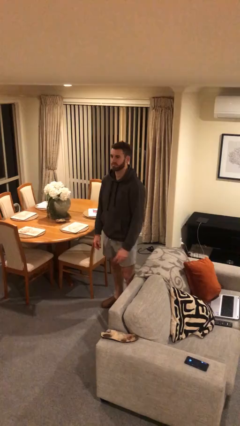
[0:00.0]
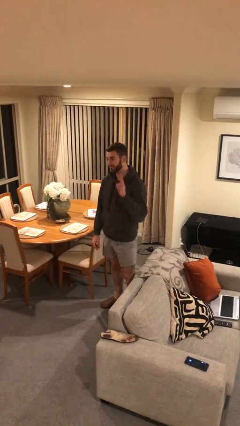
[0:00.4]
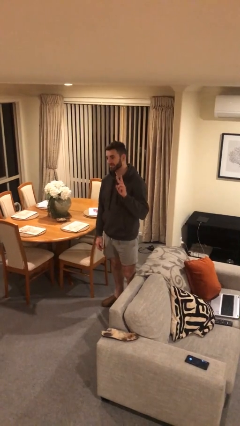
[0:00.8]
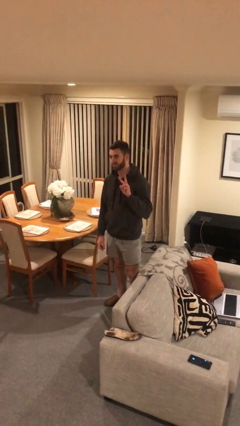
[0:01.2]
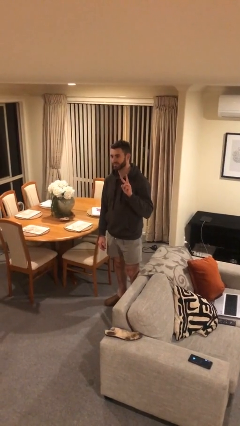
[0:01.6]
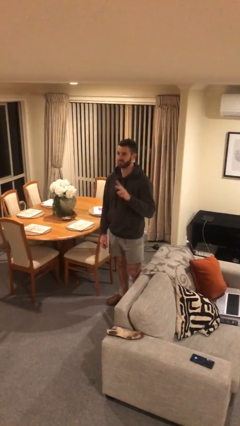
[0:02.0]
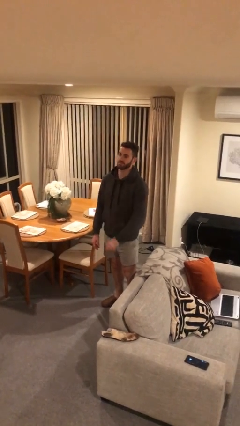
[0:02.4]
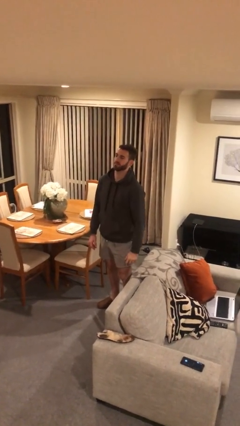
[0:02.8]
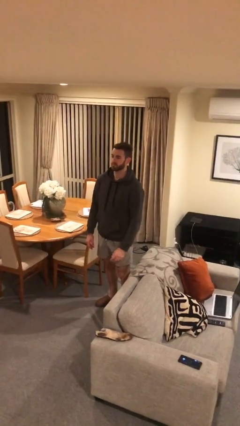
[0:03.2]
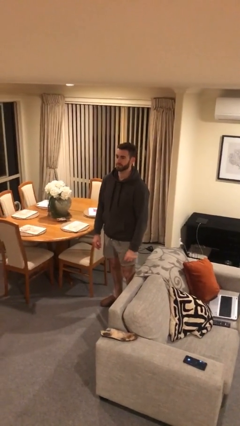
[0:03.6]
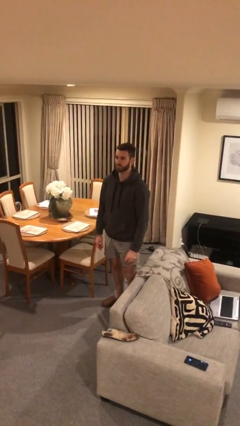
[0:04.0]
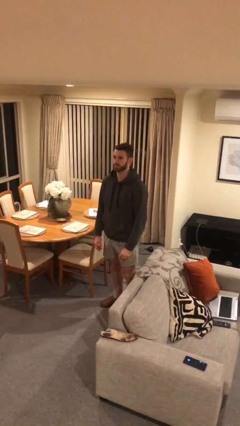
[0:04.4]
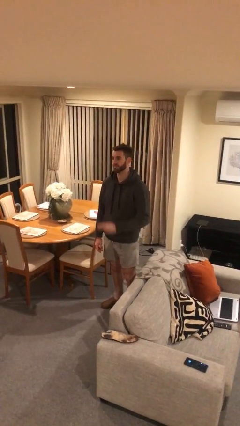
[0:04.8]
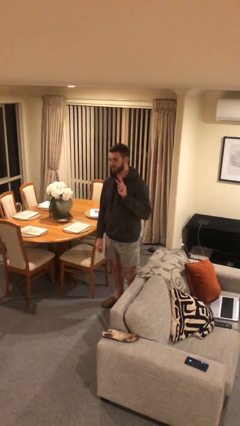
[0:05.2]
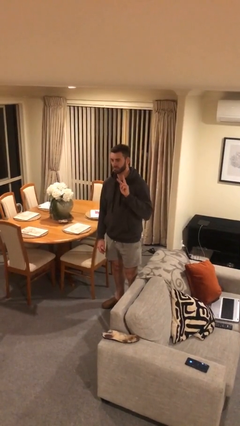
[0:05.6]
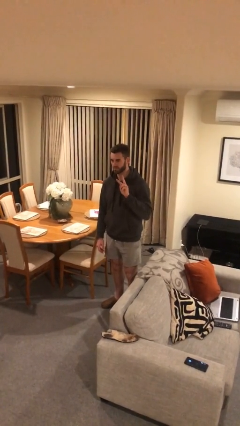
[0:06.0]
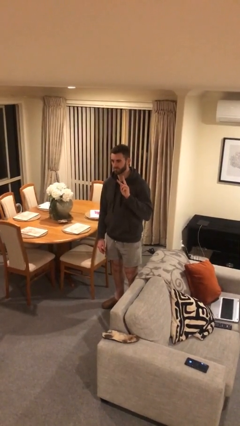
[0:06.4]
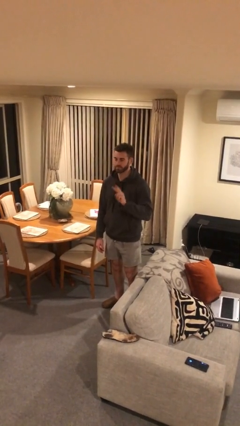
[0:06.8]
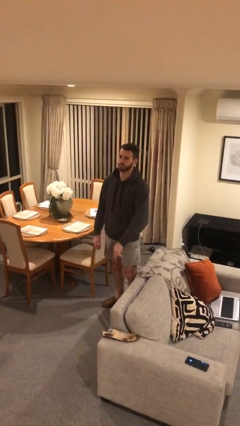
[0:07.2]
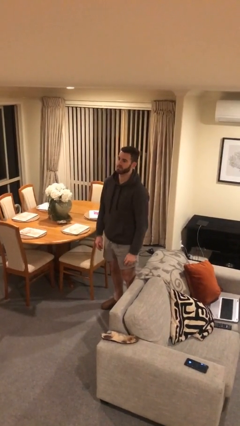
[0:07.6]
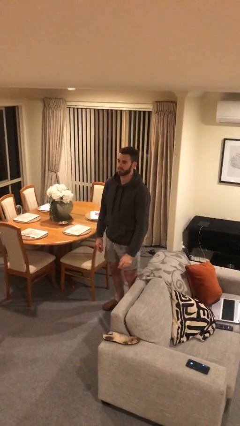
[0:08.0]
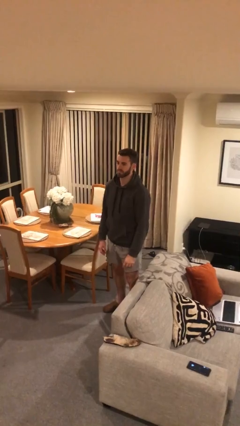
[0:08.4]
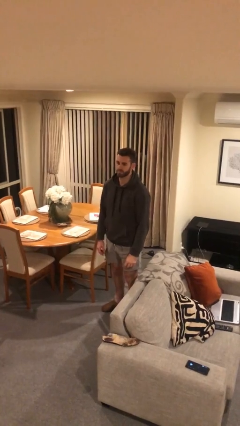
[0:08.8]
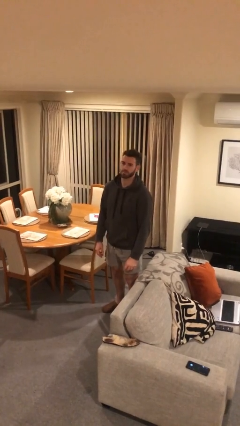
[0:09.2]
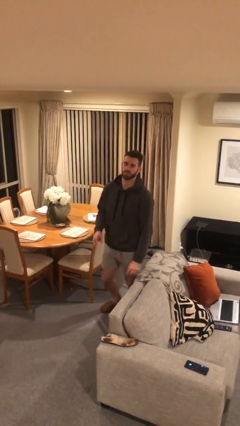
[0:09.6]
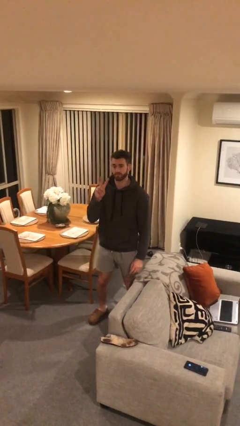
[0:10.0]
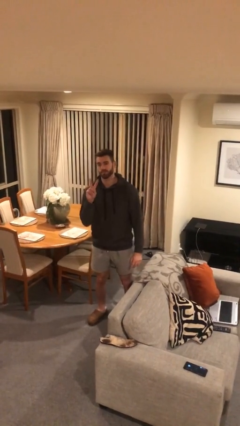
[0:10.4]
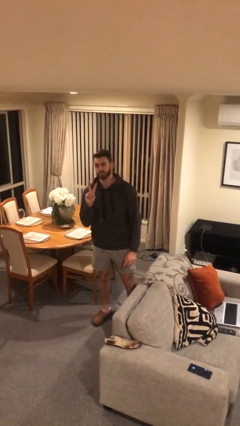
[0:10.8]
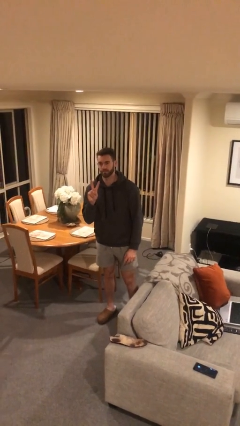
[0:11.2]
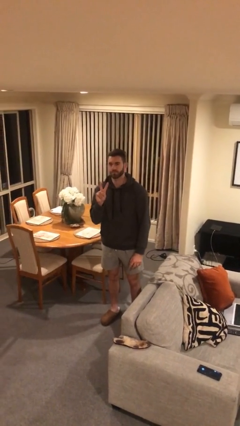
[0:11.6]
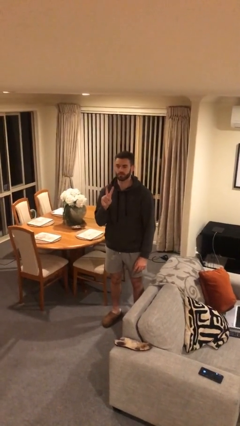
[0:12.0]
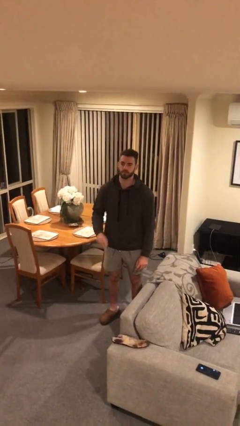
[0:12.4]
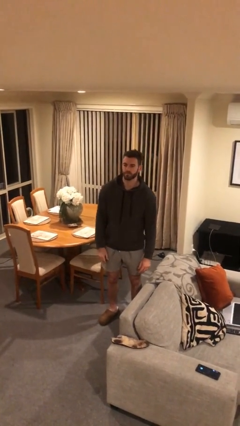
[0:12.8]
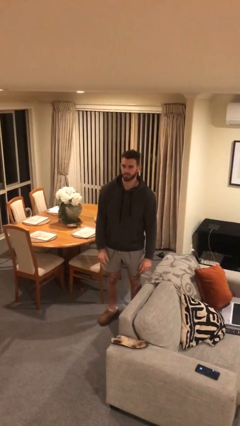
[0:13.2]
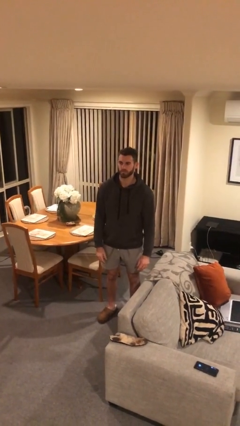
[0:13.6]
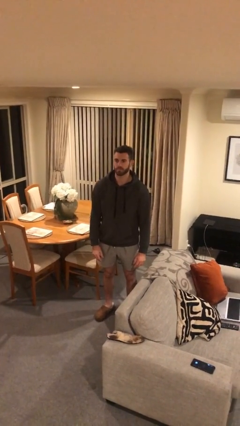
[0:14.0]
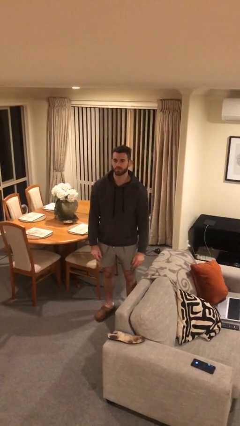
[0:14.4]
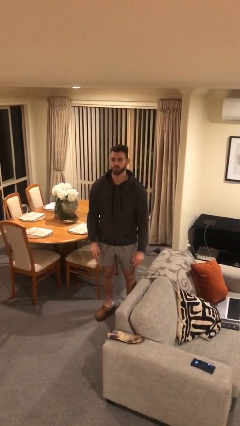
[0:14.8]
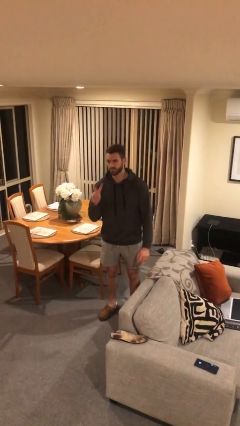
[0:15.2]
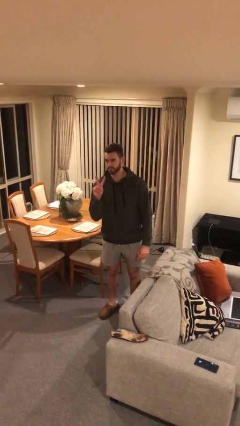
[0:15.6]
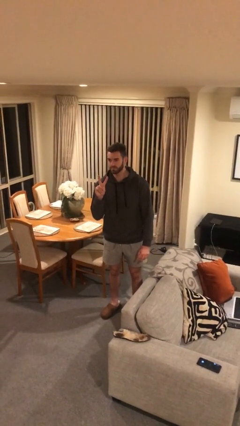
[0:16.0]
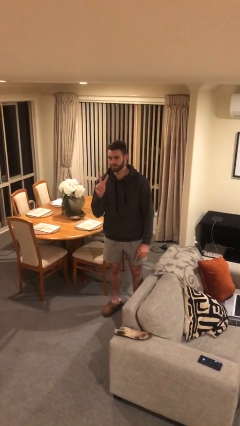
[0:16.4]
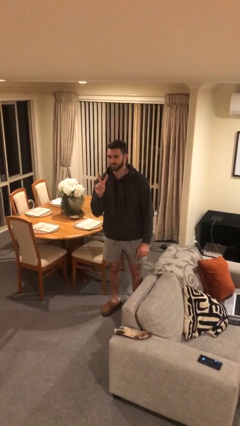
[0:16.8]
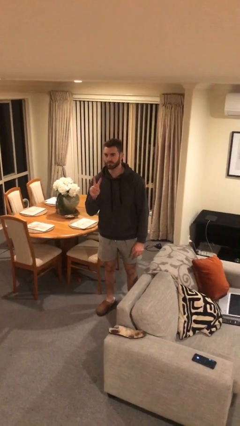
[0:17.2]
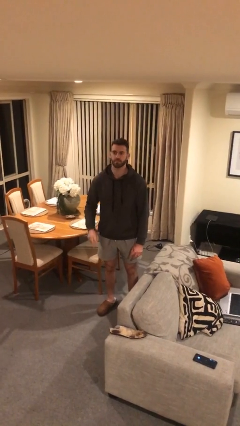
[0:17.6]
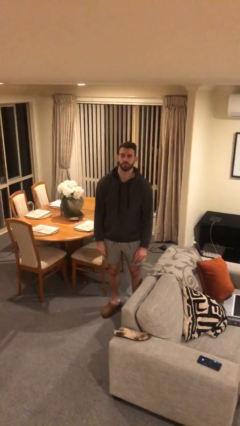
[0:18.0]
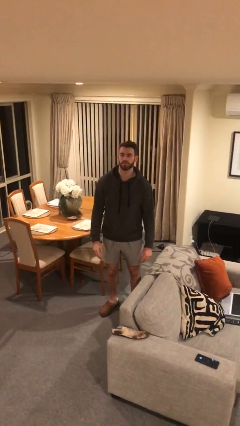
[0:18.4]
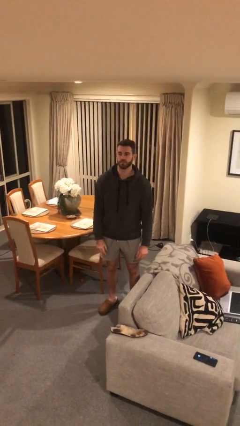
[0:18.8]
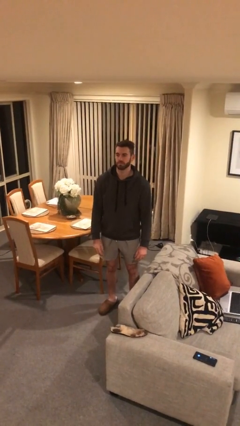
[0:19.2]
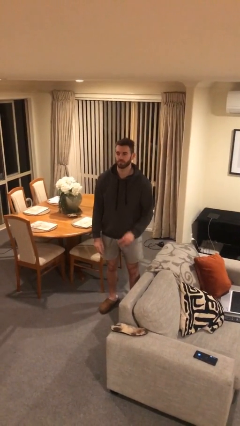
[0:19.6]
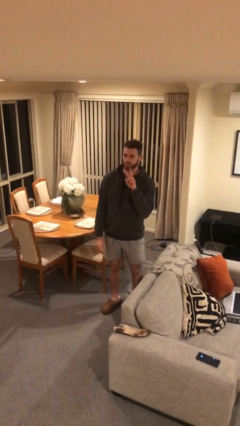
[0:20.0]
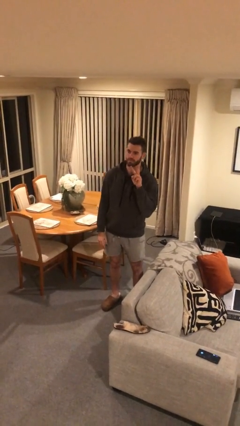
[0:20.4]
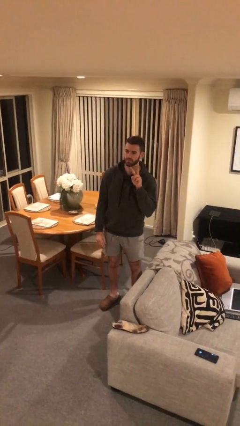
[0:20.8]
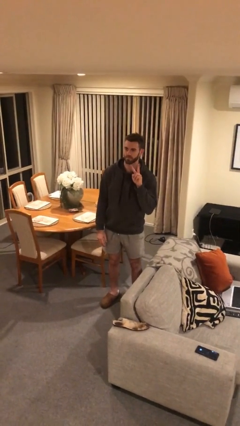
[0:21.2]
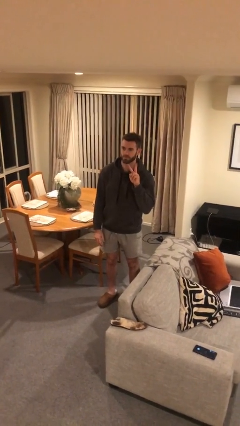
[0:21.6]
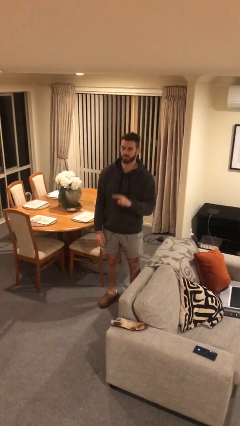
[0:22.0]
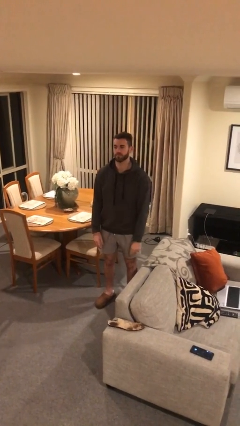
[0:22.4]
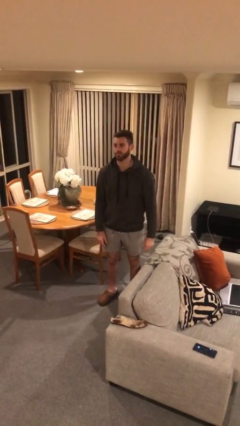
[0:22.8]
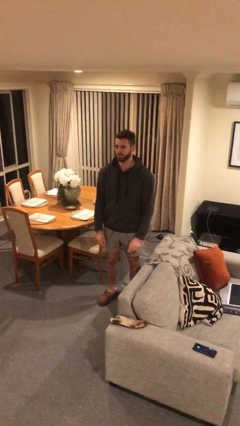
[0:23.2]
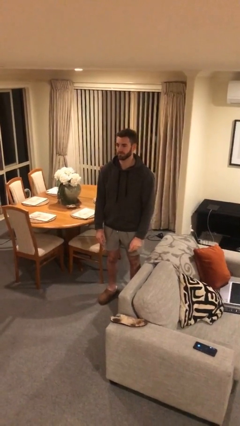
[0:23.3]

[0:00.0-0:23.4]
person gestures peace

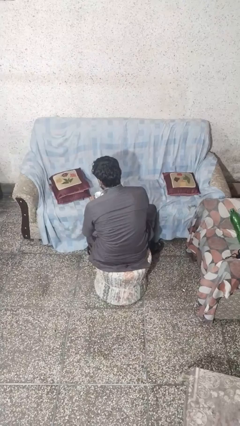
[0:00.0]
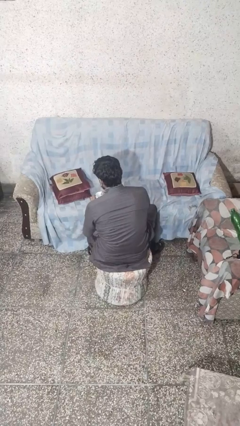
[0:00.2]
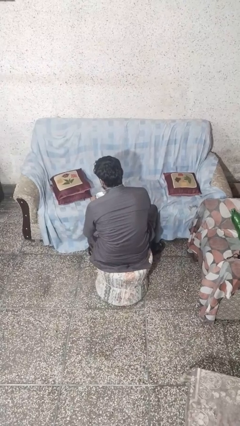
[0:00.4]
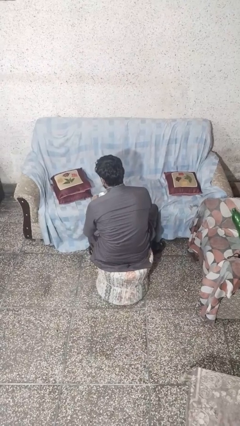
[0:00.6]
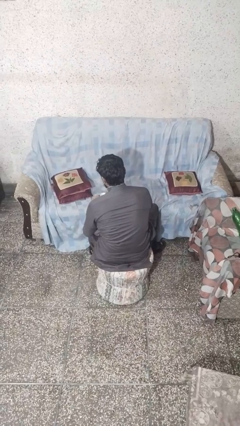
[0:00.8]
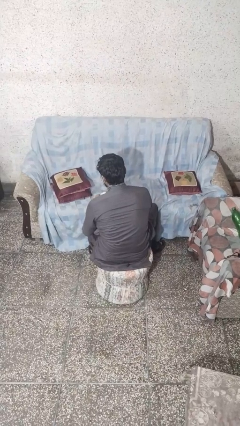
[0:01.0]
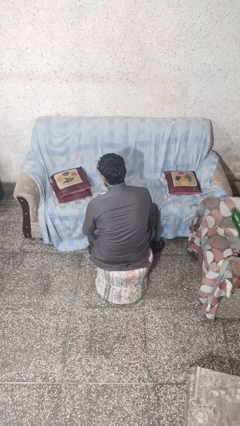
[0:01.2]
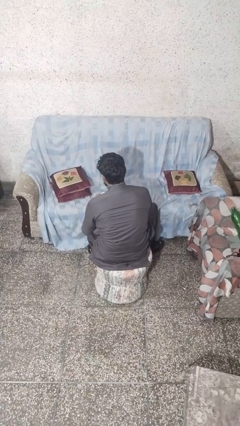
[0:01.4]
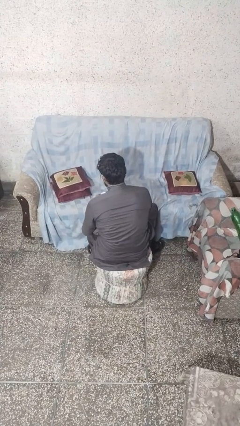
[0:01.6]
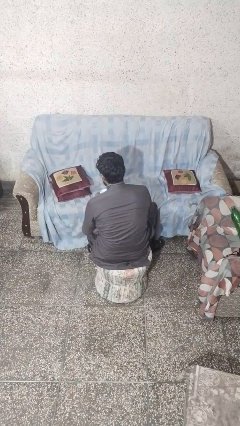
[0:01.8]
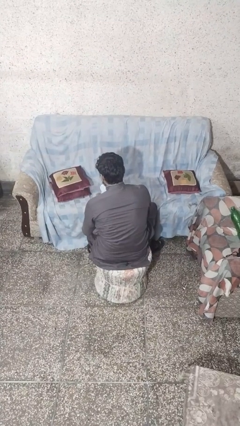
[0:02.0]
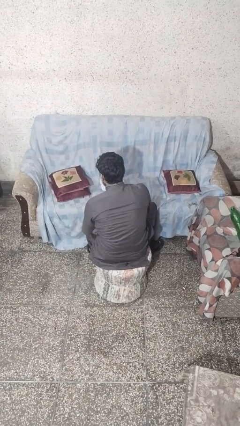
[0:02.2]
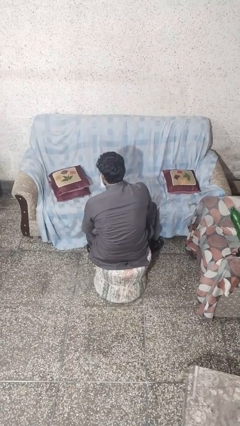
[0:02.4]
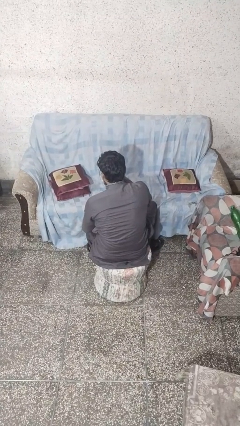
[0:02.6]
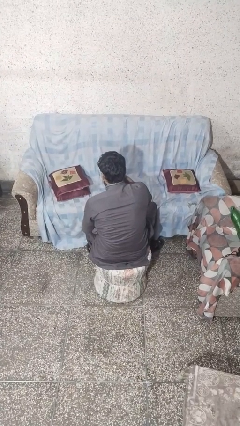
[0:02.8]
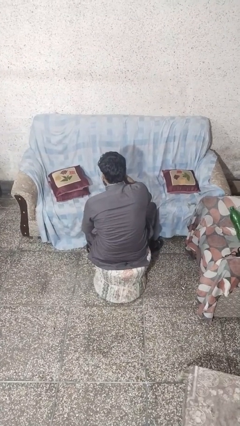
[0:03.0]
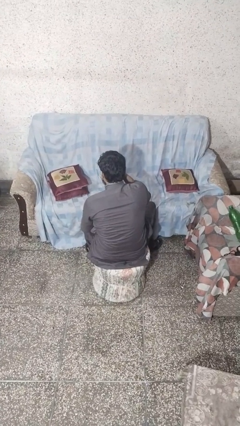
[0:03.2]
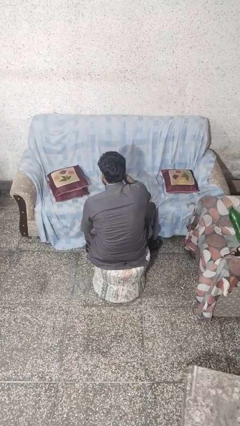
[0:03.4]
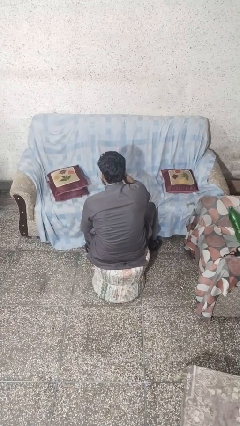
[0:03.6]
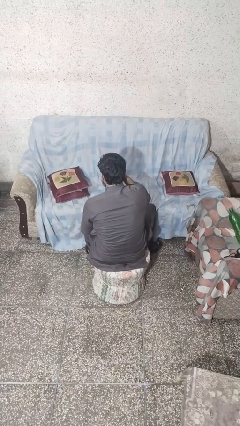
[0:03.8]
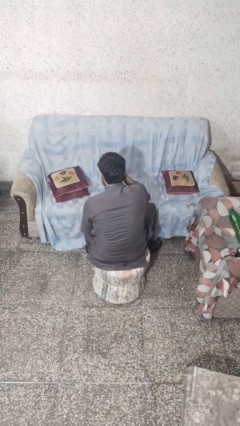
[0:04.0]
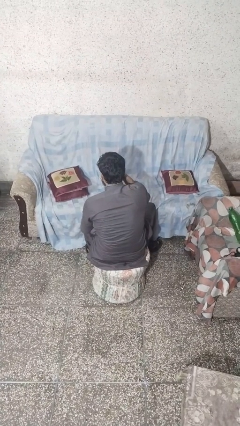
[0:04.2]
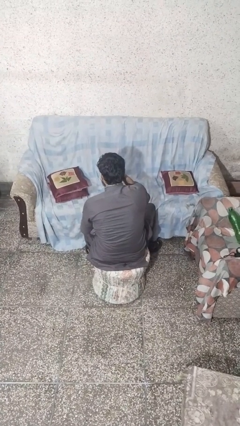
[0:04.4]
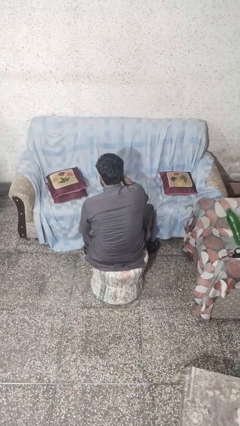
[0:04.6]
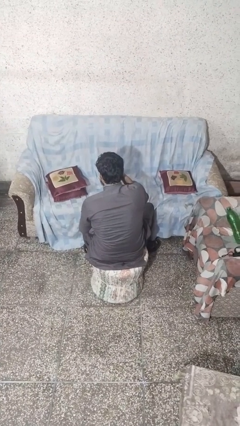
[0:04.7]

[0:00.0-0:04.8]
person drinks from mug

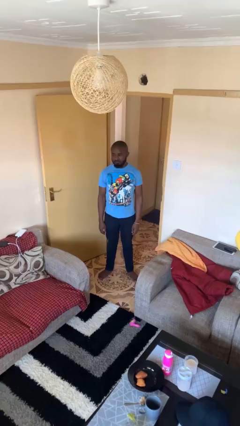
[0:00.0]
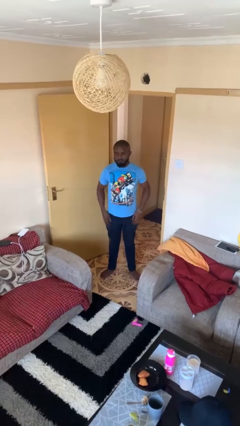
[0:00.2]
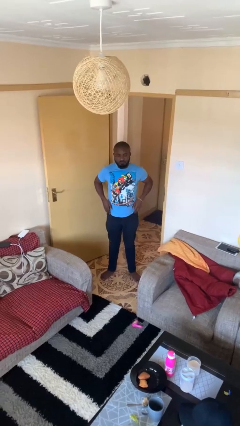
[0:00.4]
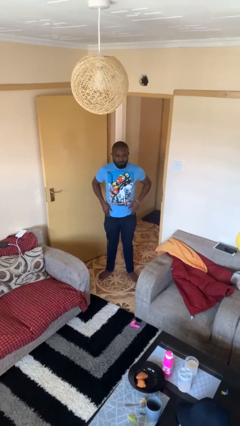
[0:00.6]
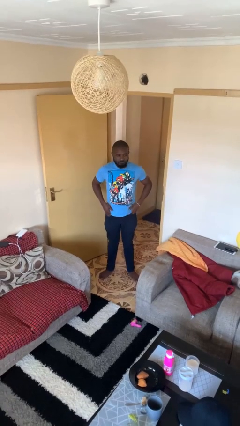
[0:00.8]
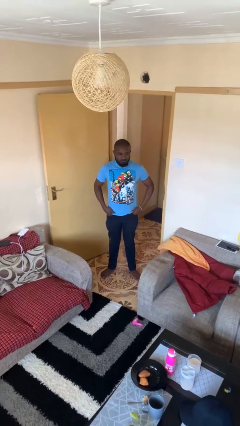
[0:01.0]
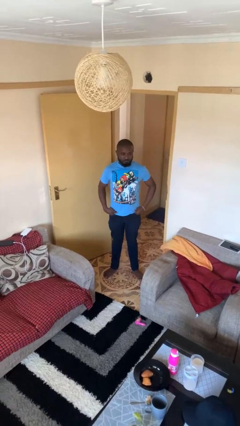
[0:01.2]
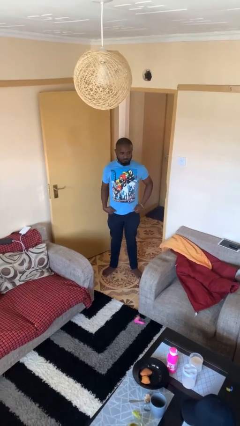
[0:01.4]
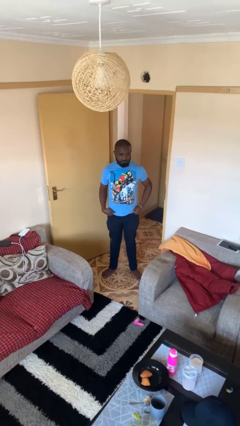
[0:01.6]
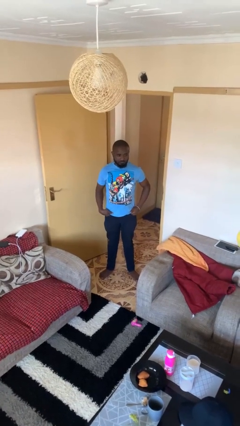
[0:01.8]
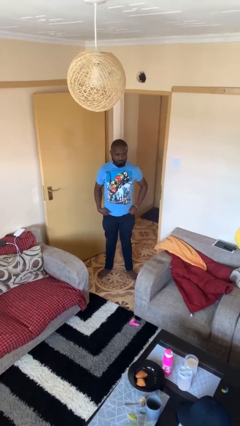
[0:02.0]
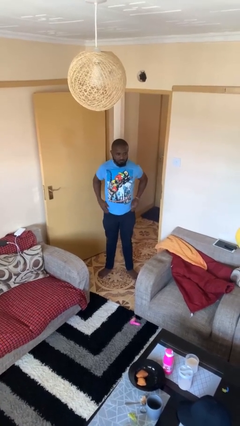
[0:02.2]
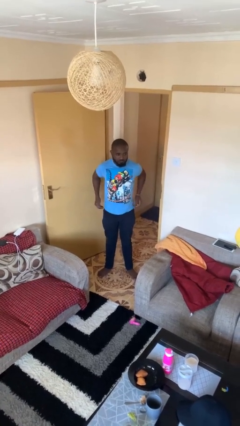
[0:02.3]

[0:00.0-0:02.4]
person puts hands in back pockets
